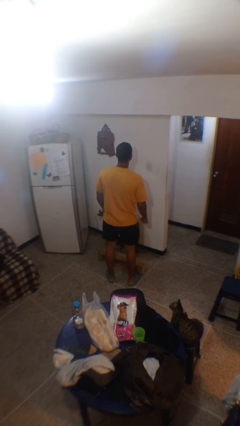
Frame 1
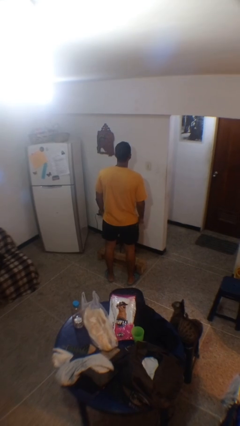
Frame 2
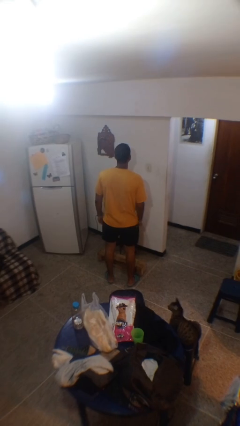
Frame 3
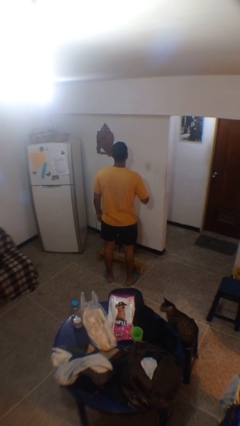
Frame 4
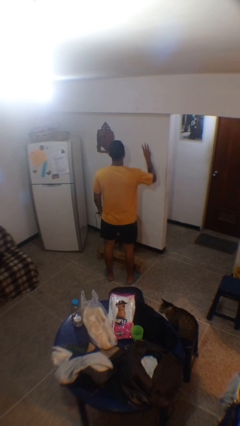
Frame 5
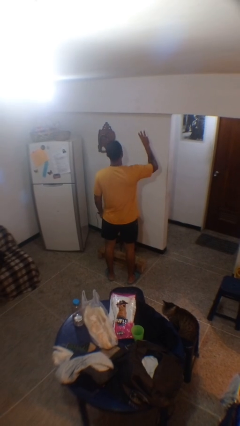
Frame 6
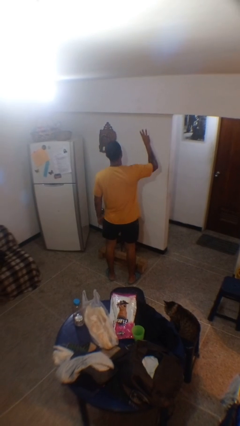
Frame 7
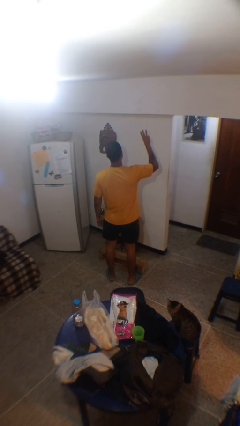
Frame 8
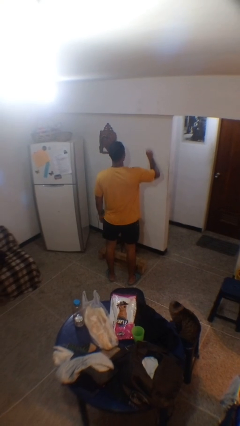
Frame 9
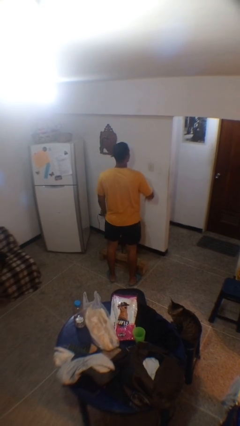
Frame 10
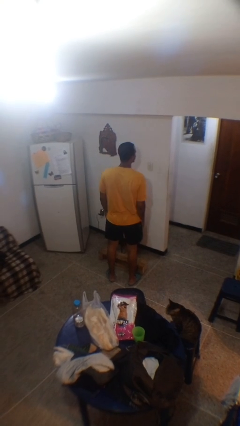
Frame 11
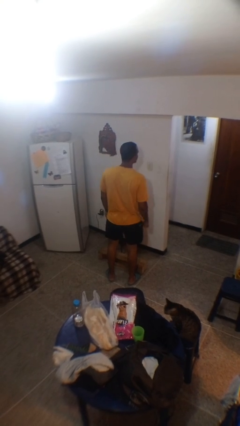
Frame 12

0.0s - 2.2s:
person gestures number three

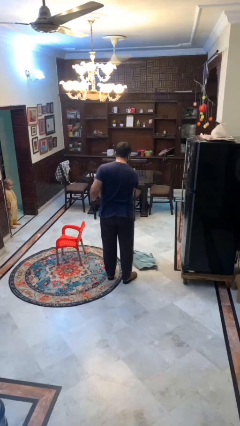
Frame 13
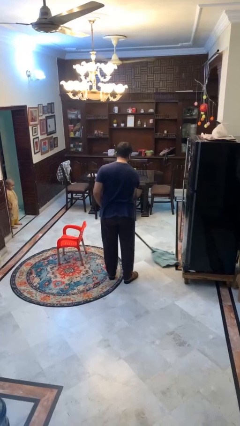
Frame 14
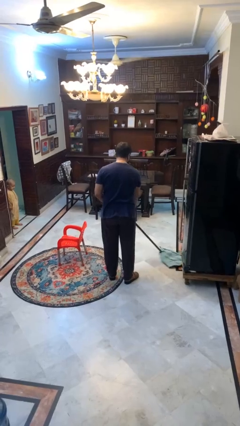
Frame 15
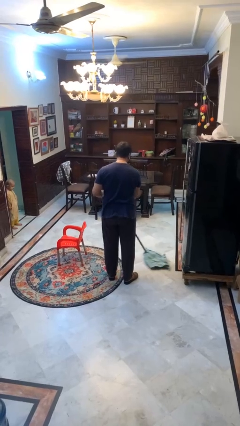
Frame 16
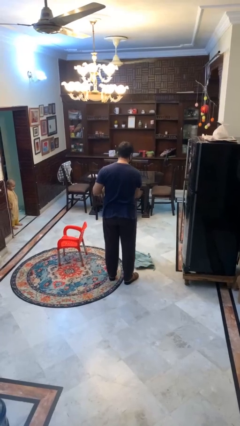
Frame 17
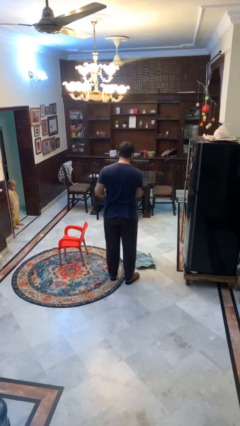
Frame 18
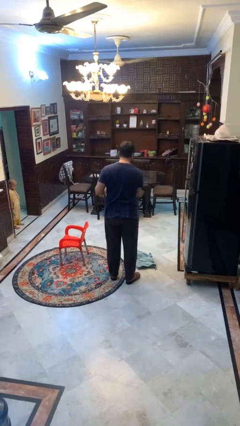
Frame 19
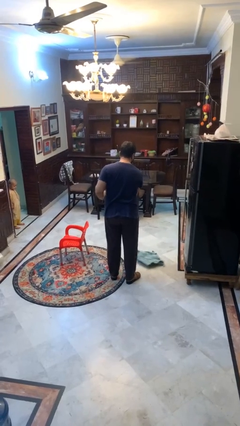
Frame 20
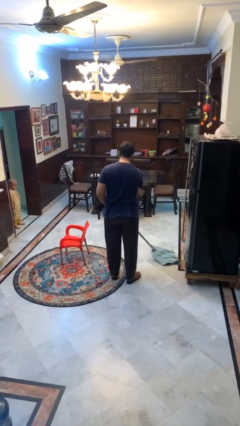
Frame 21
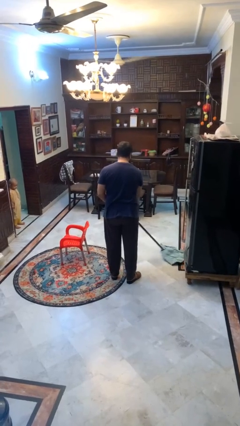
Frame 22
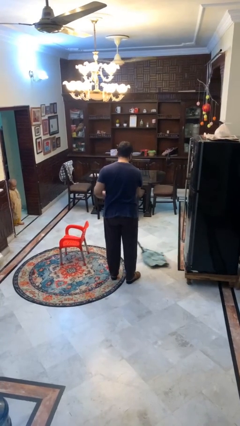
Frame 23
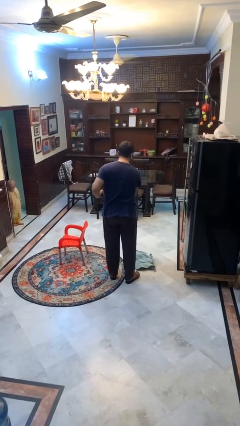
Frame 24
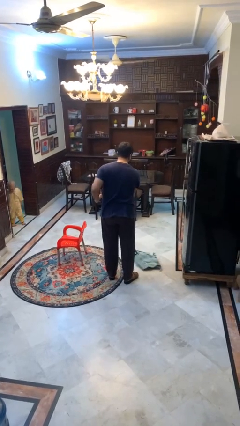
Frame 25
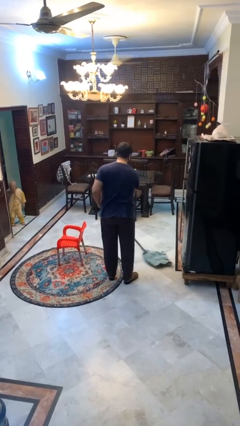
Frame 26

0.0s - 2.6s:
person mops

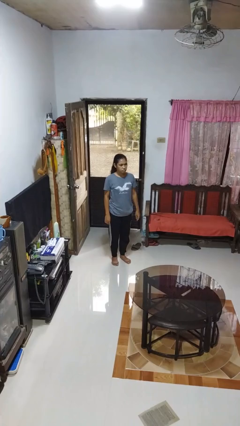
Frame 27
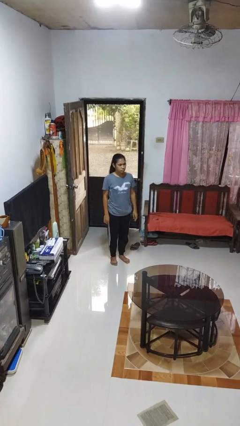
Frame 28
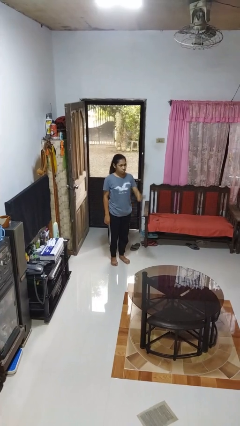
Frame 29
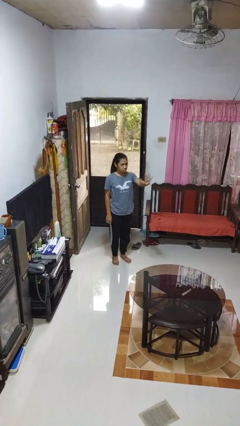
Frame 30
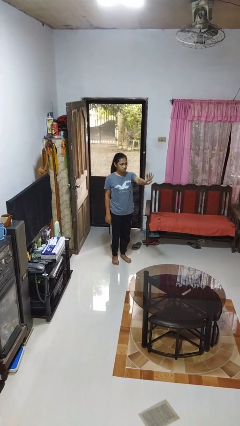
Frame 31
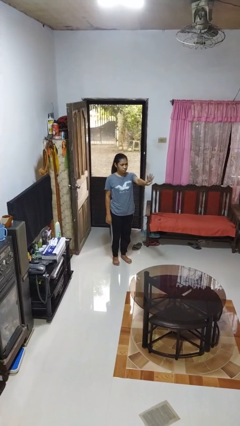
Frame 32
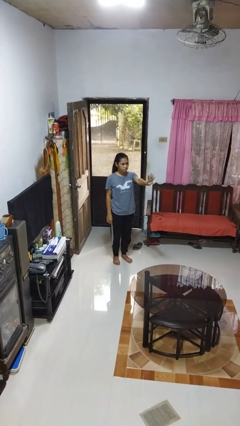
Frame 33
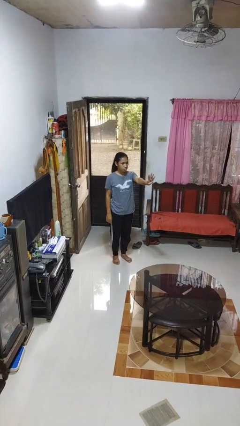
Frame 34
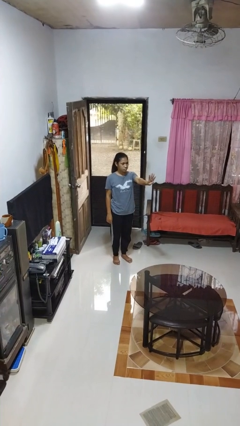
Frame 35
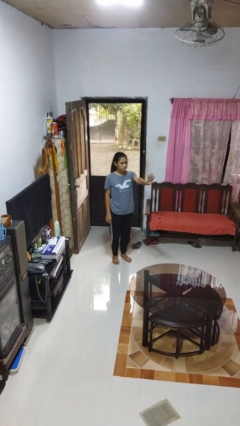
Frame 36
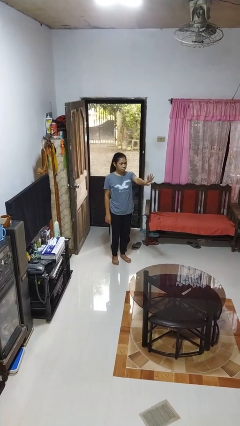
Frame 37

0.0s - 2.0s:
person gestures number four

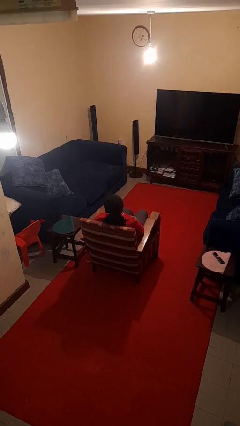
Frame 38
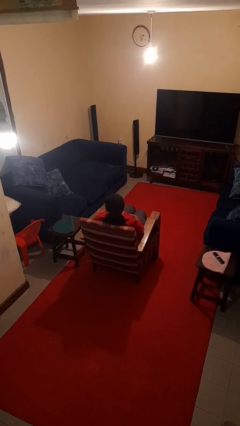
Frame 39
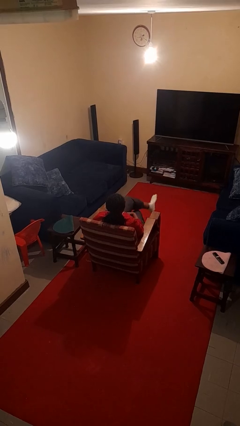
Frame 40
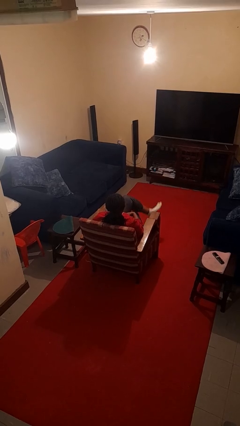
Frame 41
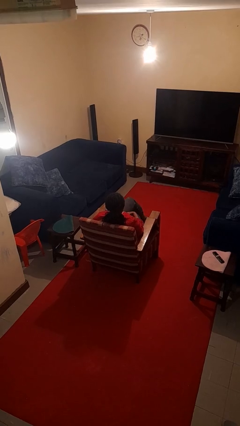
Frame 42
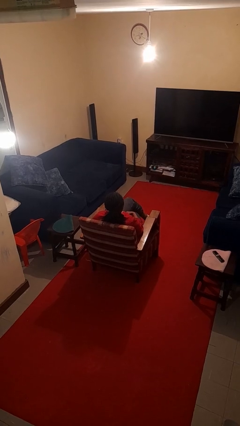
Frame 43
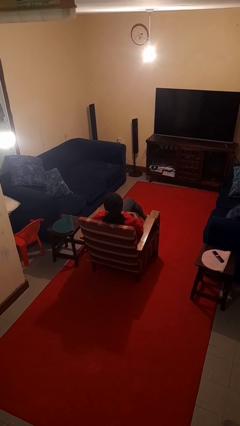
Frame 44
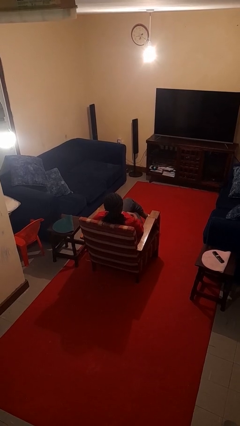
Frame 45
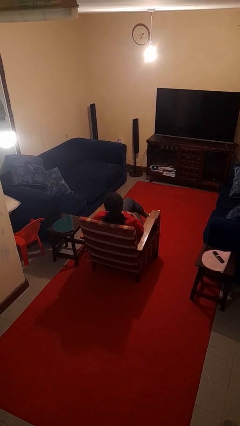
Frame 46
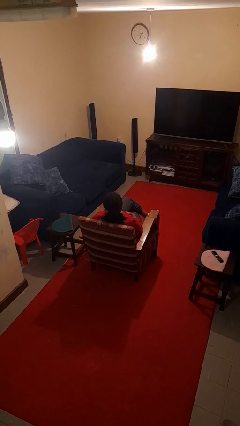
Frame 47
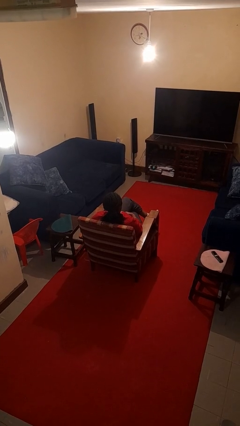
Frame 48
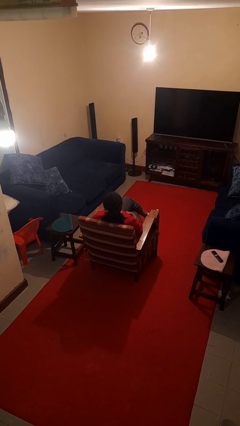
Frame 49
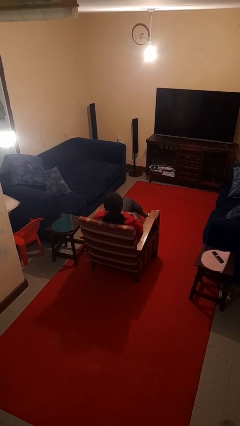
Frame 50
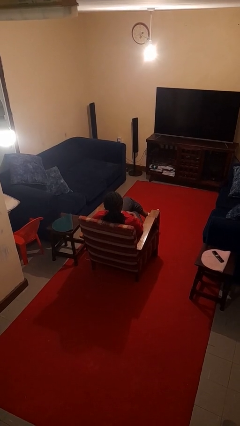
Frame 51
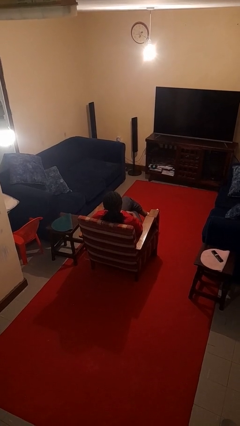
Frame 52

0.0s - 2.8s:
person crosses legs

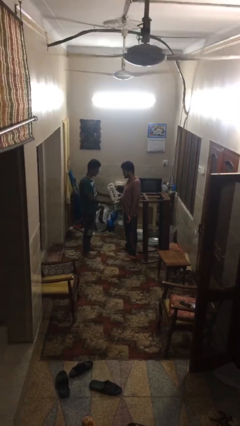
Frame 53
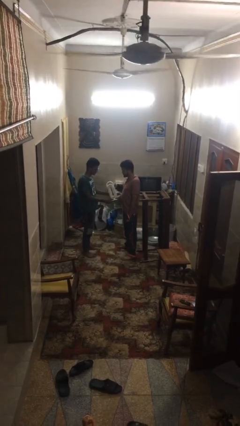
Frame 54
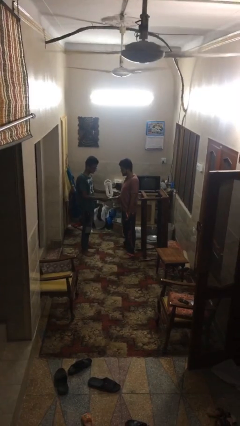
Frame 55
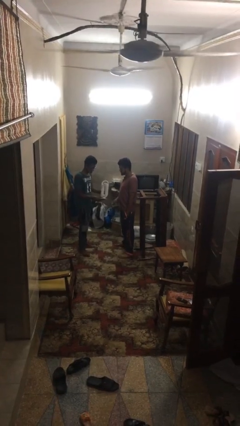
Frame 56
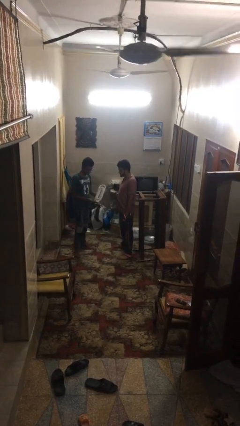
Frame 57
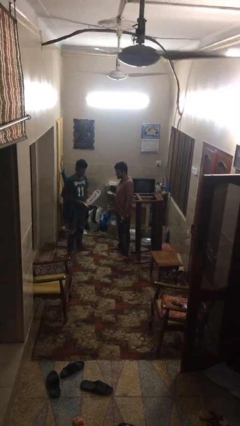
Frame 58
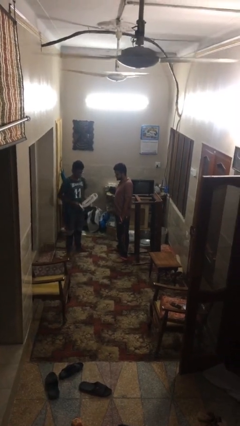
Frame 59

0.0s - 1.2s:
person transfers object to person

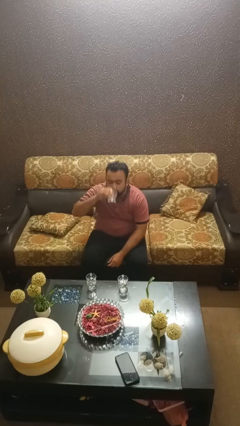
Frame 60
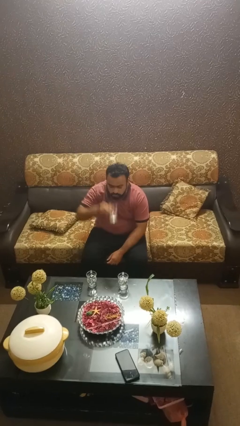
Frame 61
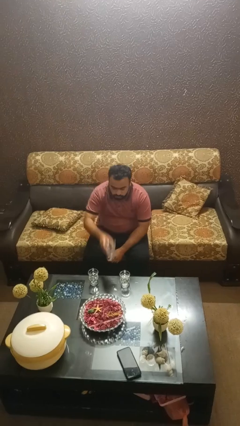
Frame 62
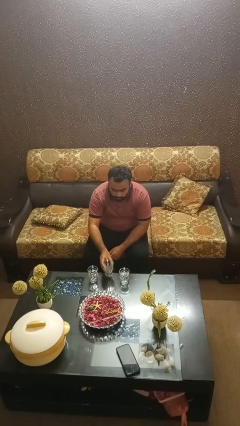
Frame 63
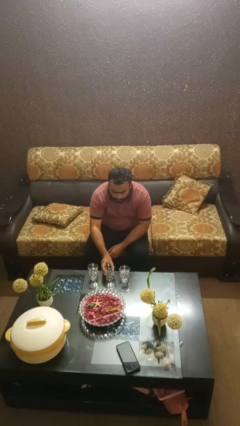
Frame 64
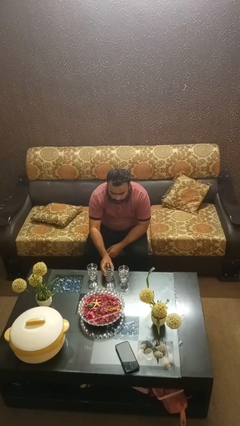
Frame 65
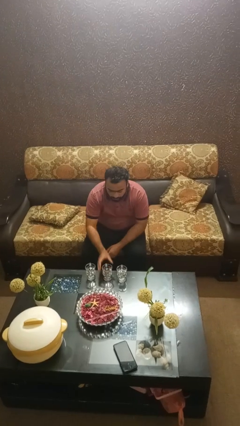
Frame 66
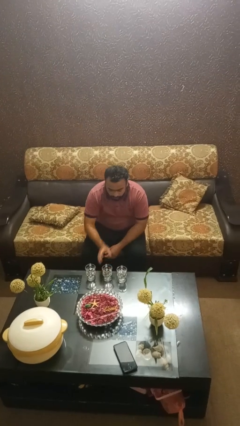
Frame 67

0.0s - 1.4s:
person puts down object on table

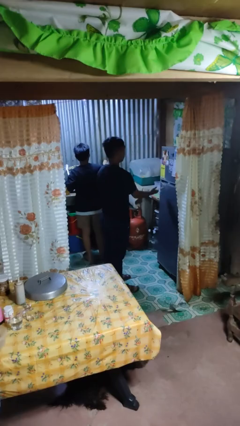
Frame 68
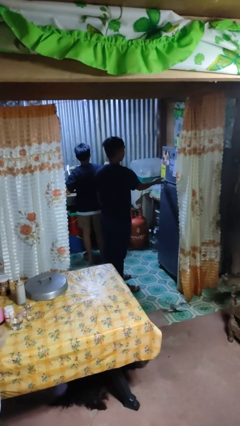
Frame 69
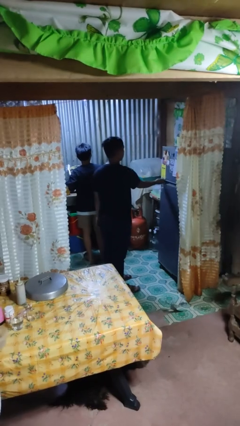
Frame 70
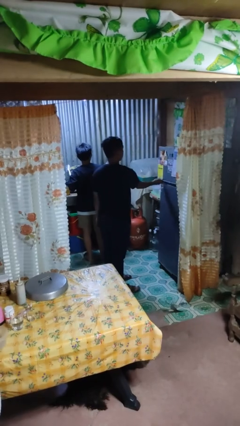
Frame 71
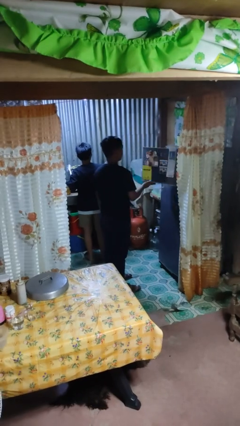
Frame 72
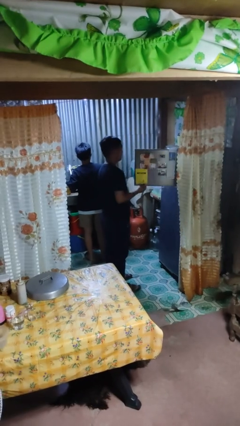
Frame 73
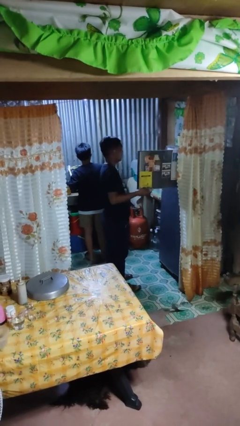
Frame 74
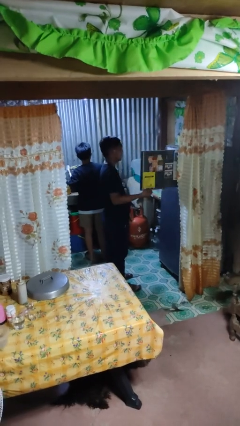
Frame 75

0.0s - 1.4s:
person opens refrigerator

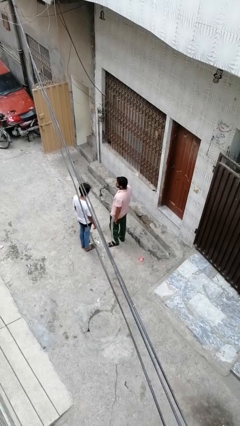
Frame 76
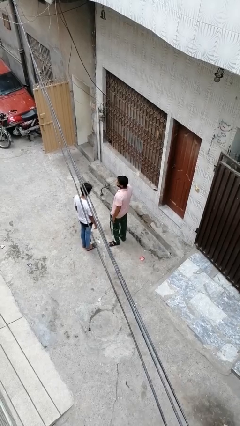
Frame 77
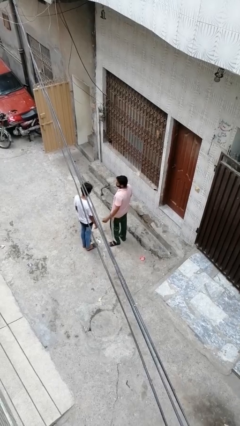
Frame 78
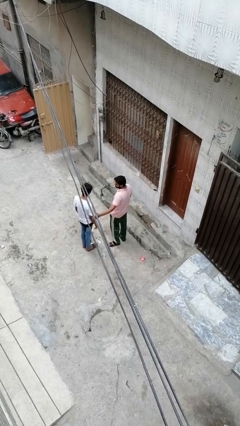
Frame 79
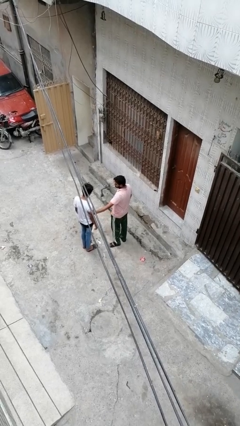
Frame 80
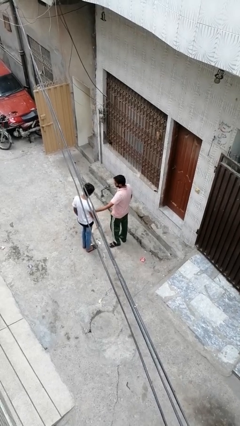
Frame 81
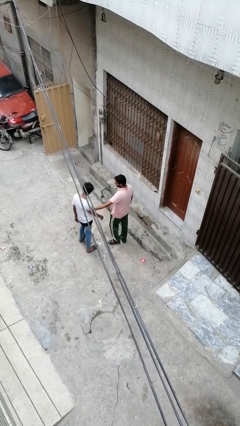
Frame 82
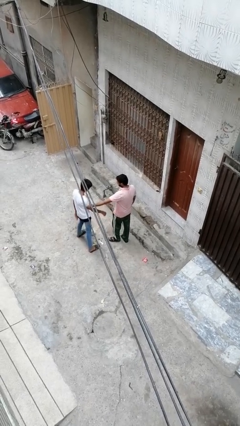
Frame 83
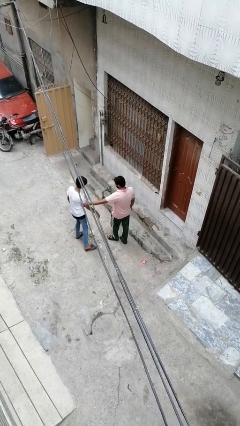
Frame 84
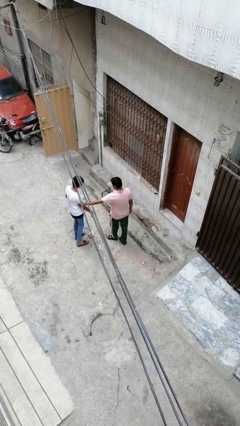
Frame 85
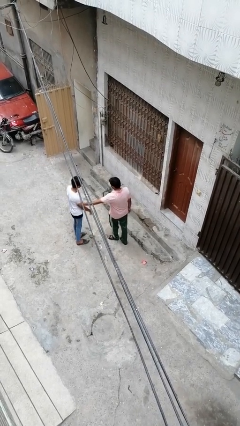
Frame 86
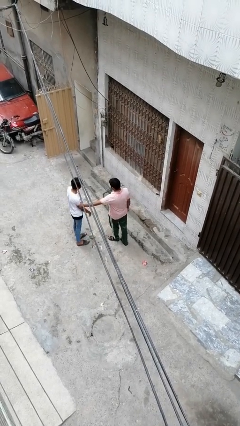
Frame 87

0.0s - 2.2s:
person grabs person by bicep

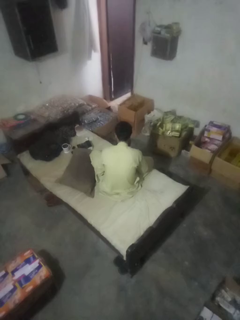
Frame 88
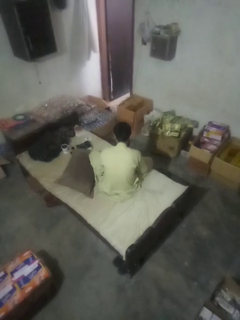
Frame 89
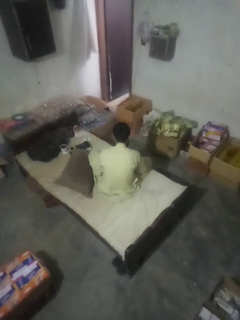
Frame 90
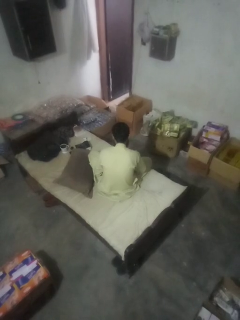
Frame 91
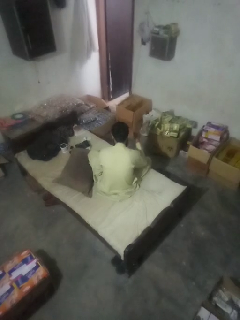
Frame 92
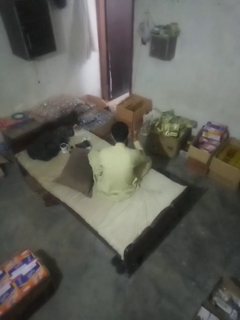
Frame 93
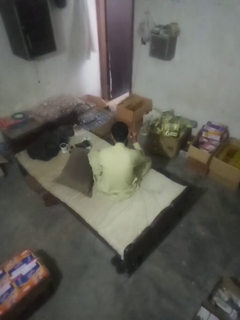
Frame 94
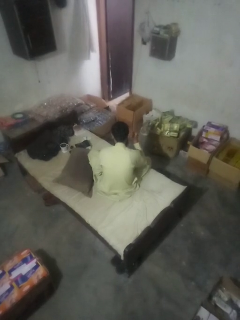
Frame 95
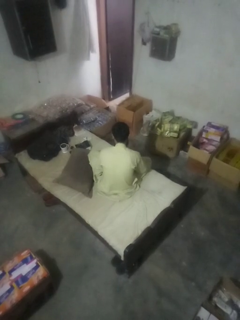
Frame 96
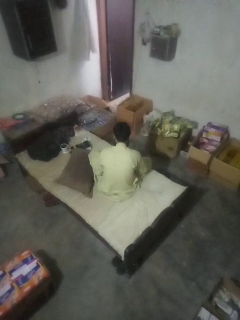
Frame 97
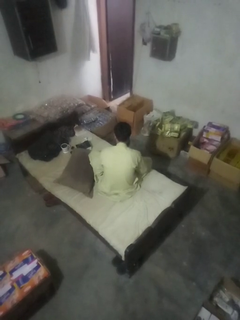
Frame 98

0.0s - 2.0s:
person gestures behind me
